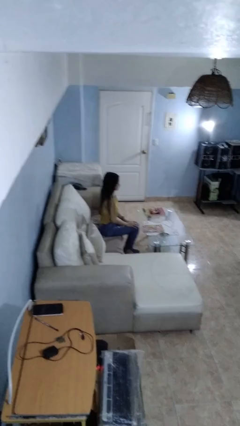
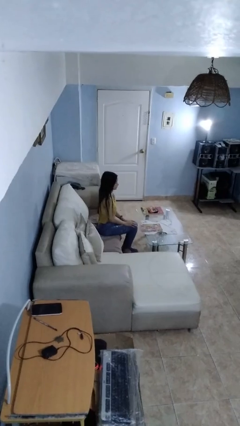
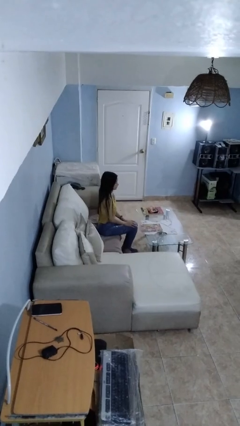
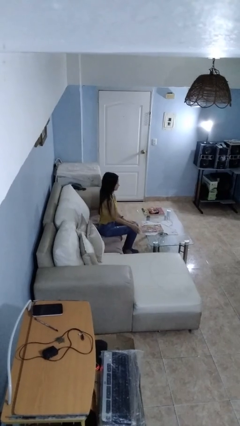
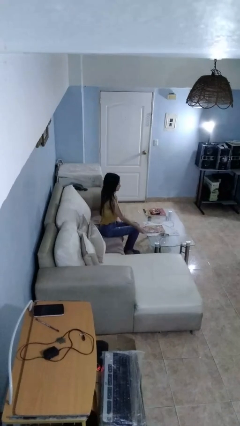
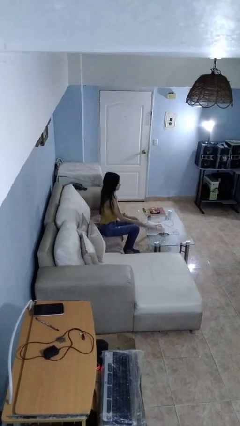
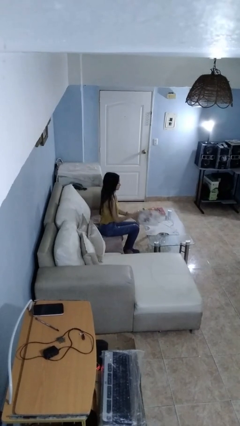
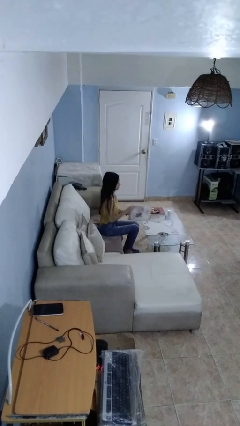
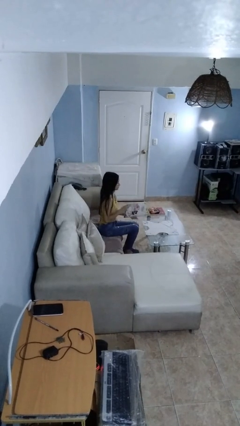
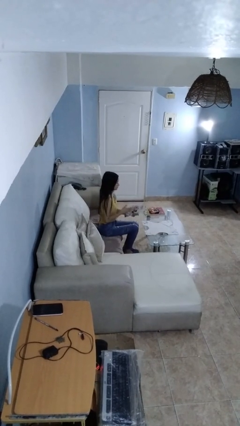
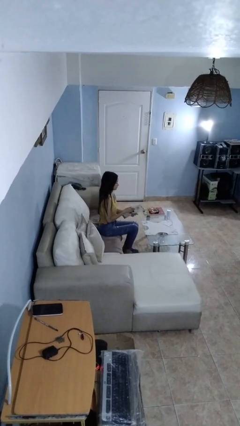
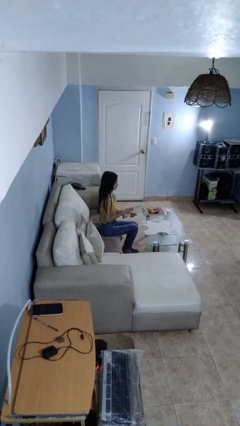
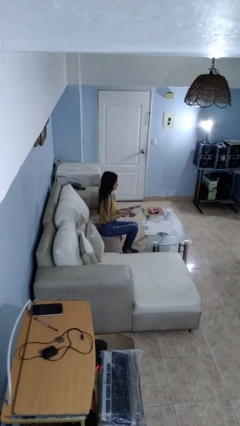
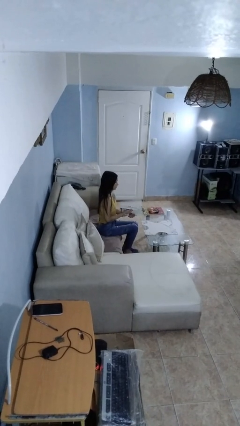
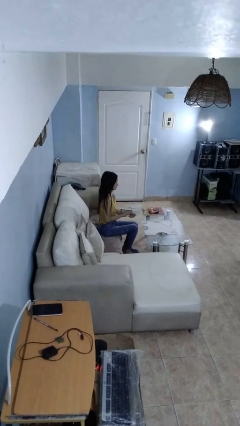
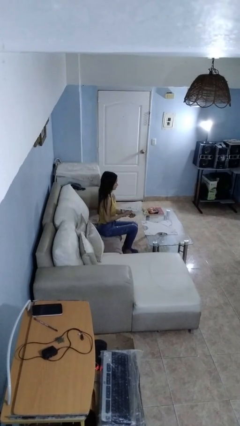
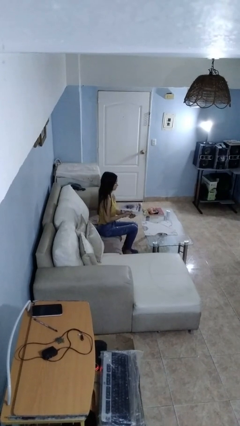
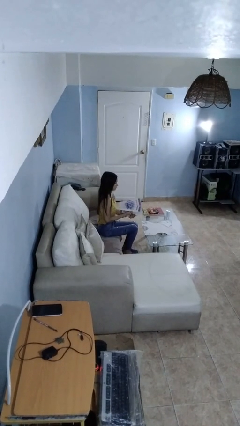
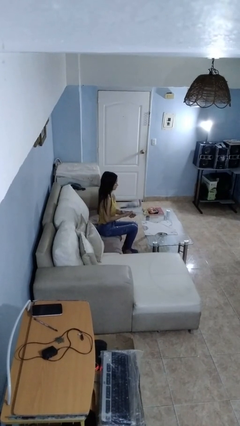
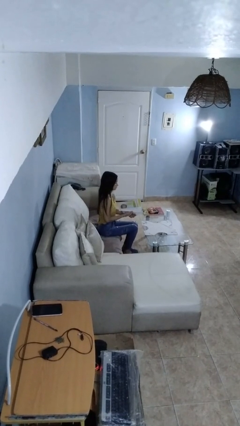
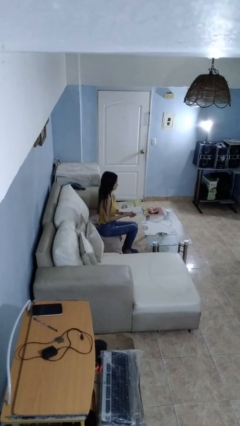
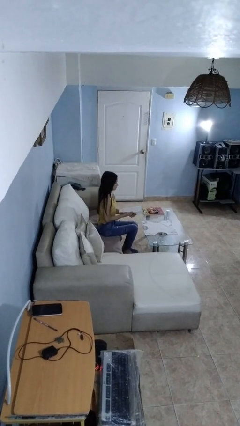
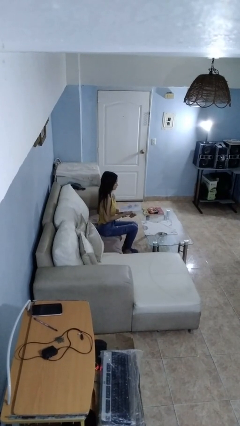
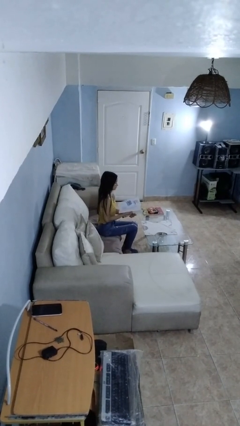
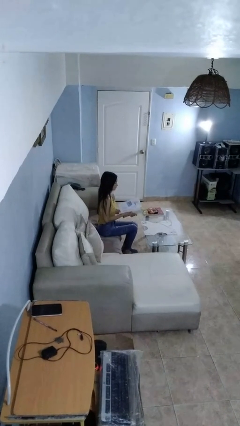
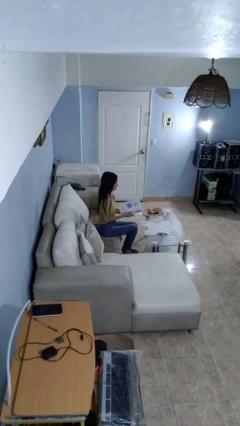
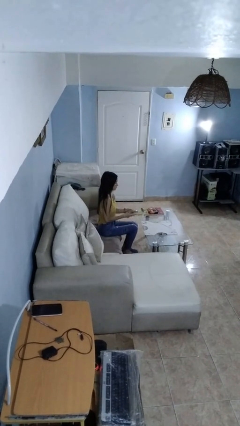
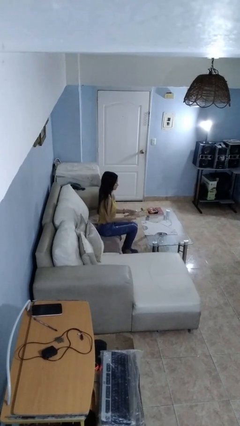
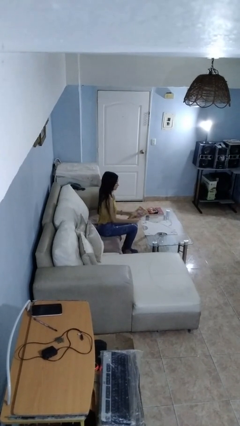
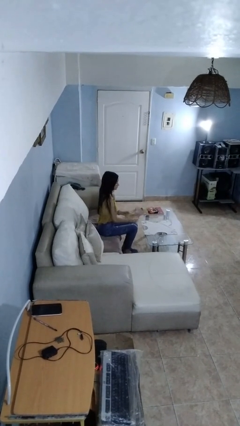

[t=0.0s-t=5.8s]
person reads magazine

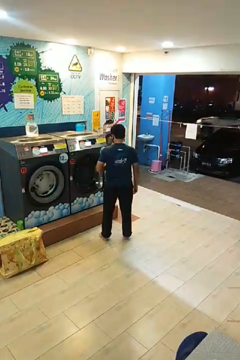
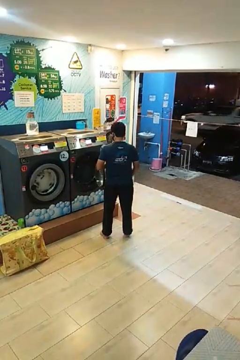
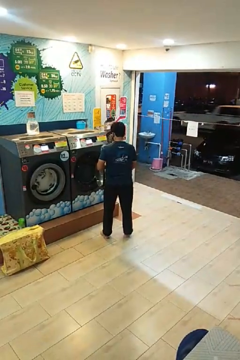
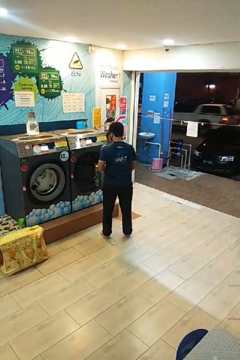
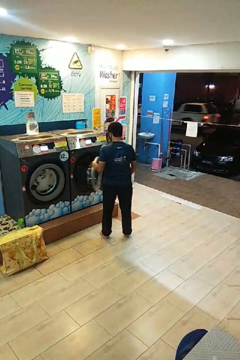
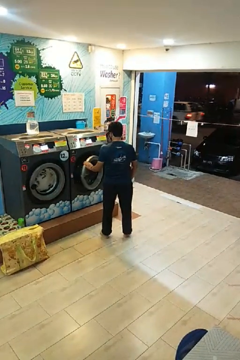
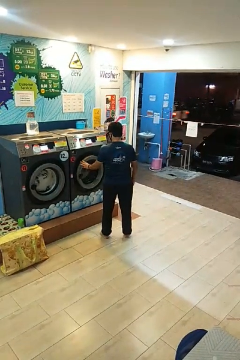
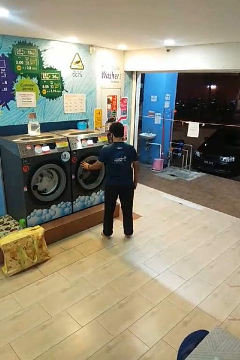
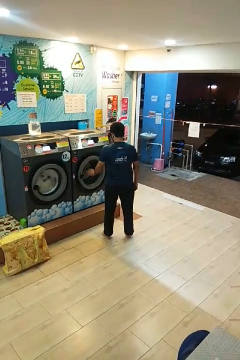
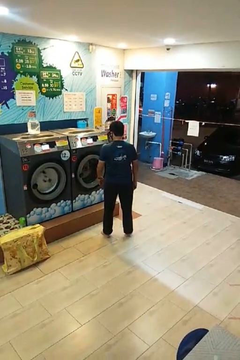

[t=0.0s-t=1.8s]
person closes clothes washer

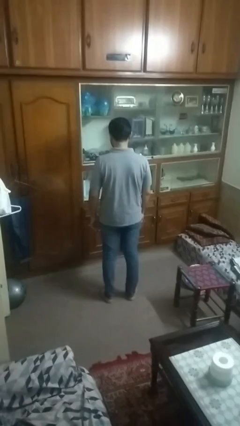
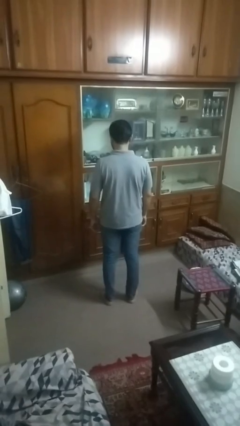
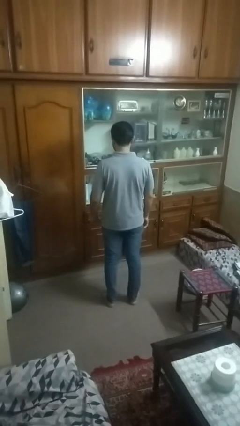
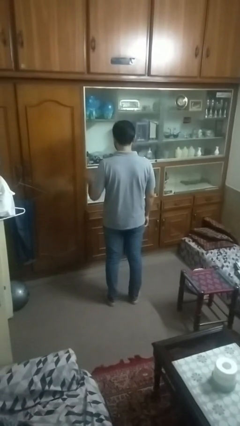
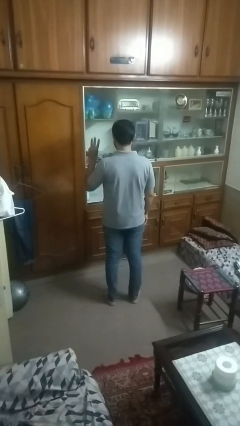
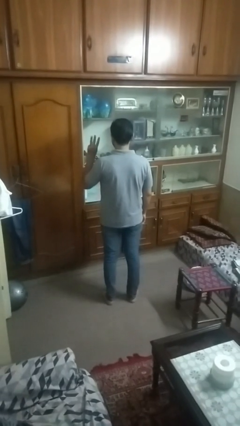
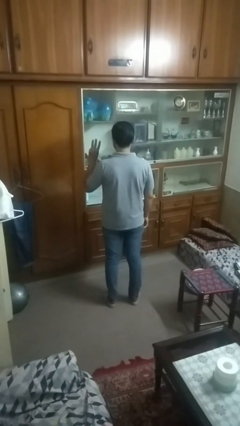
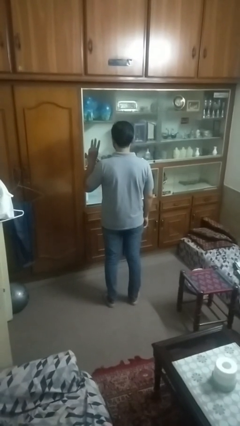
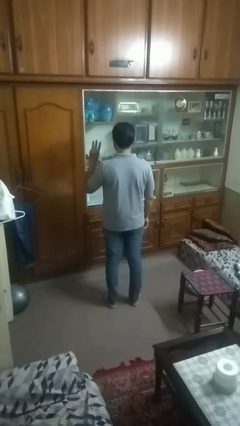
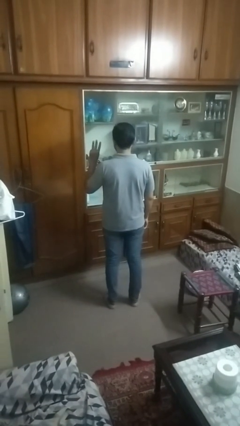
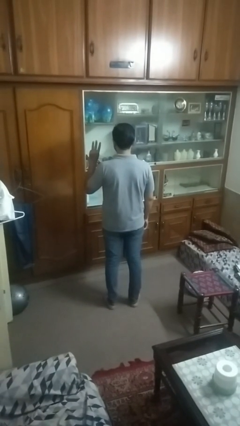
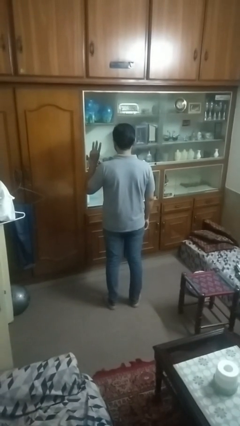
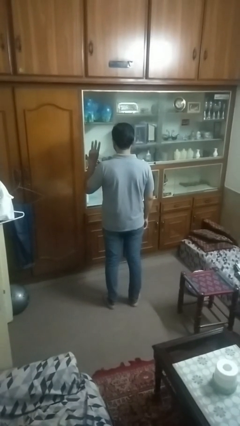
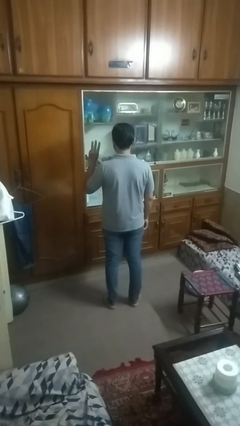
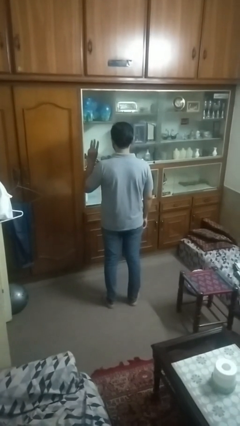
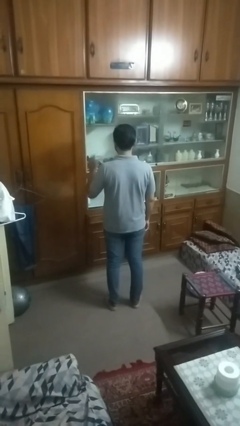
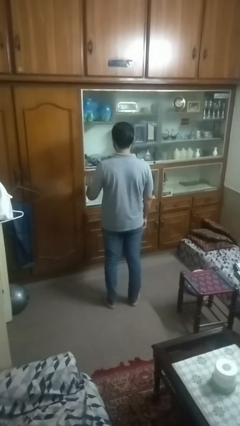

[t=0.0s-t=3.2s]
person gestures number three

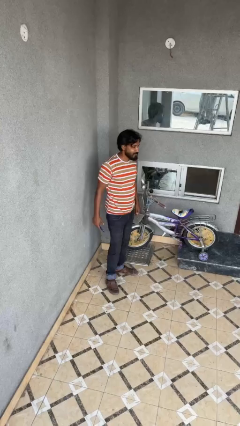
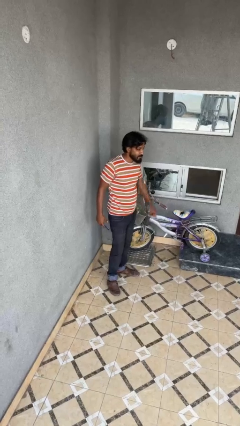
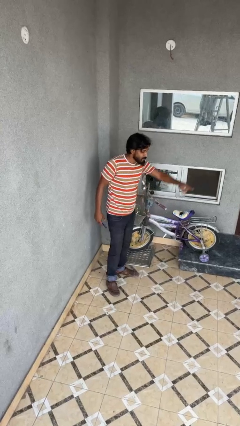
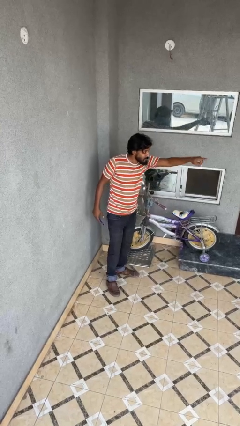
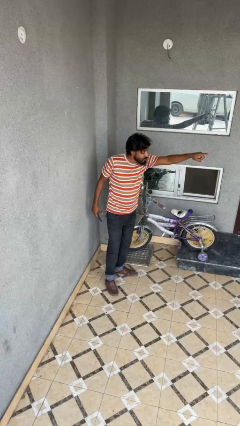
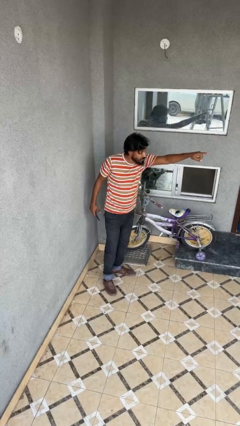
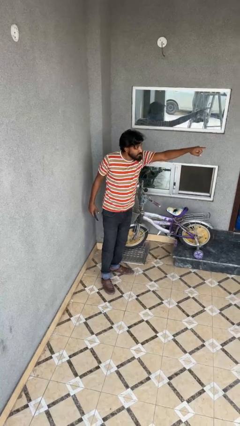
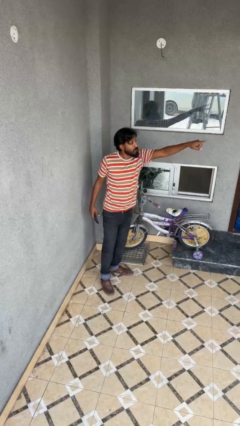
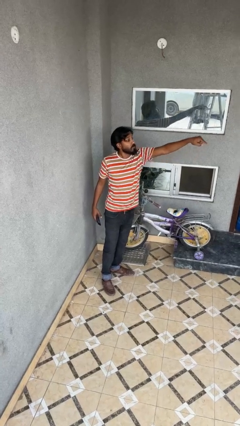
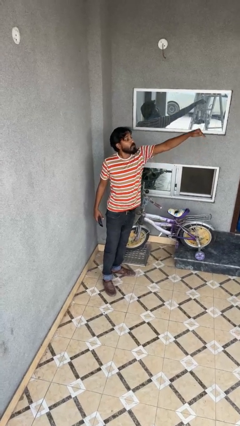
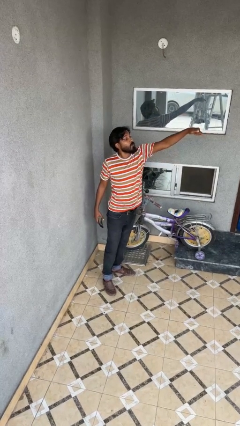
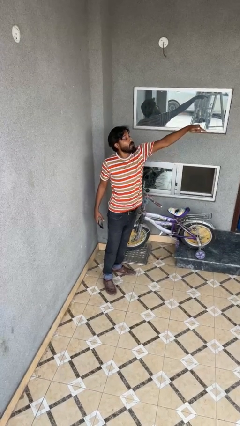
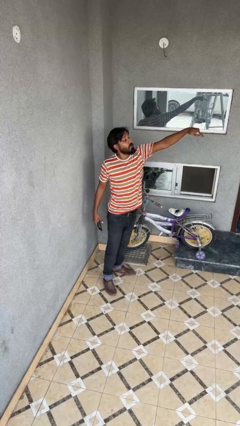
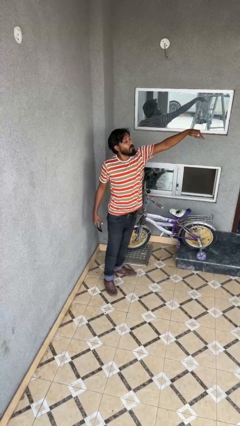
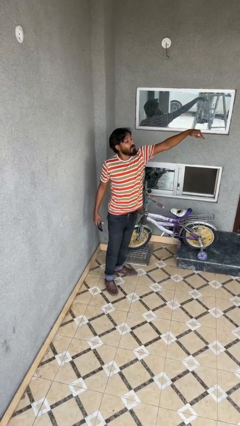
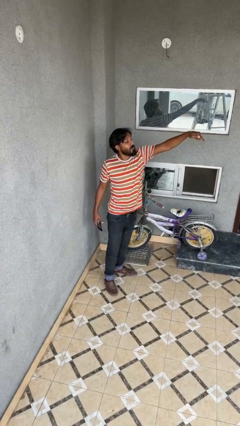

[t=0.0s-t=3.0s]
person points at person

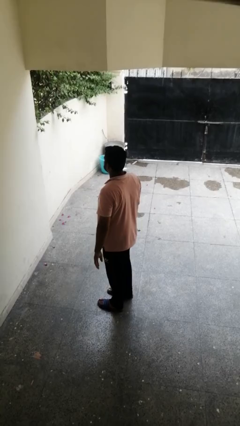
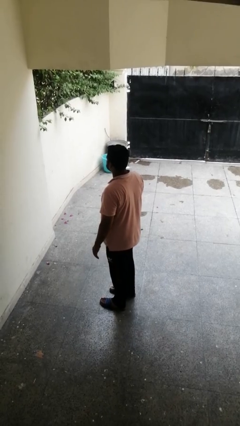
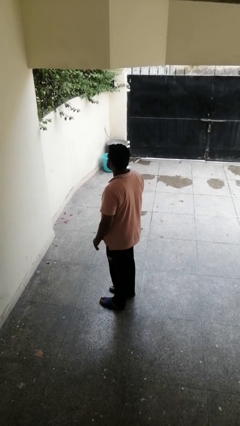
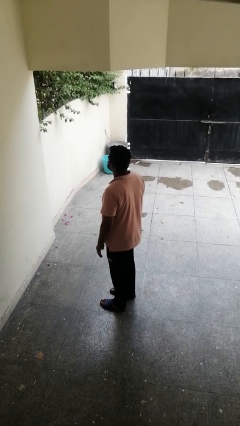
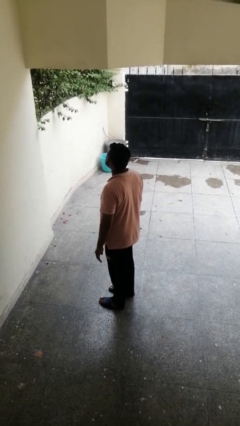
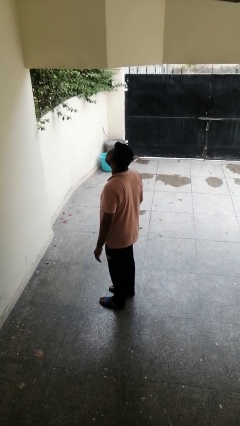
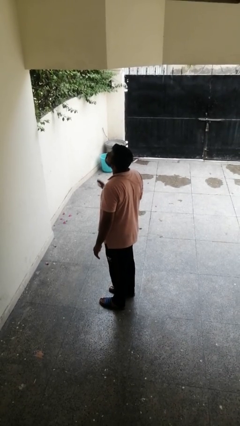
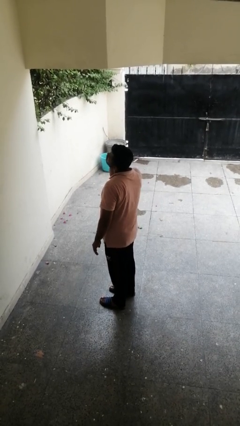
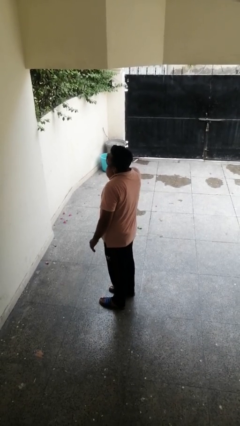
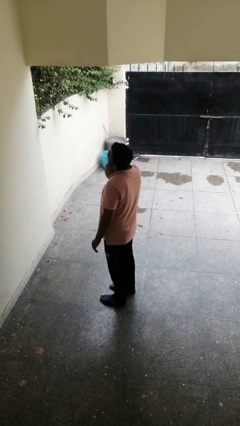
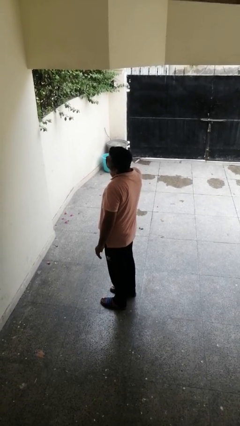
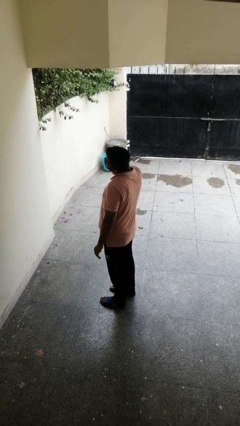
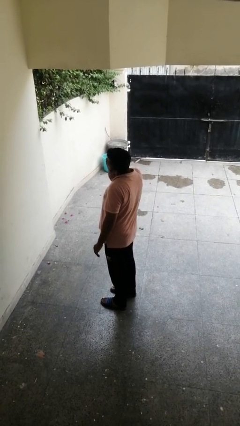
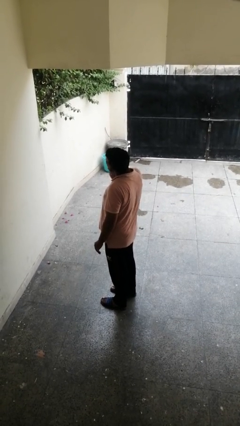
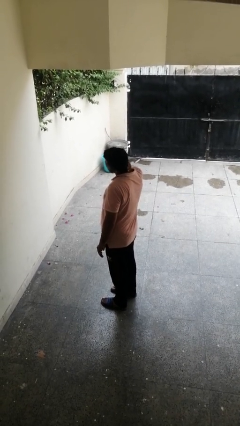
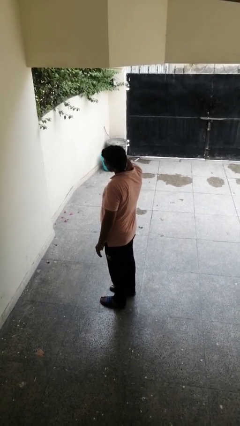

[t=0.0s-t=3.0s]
person rubs neck

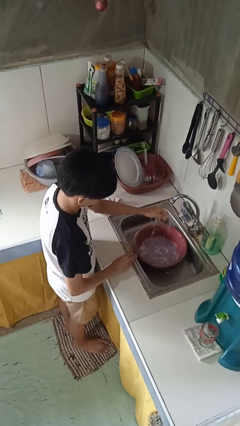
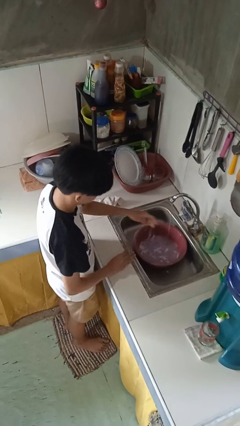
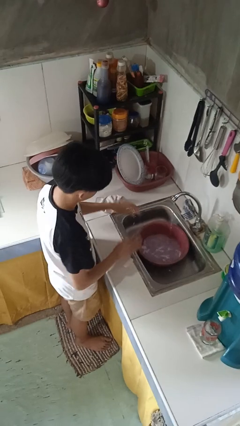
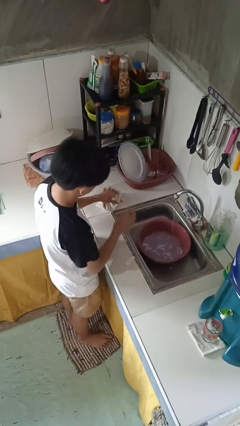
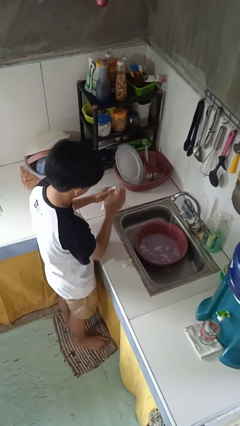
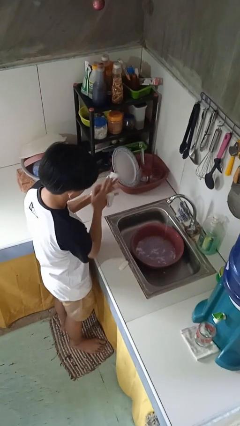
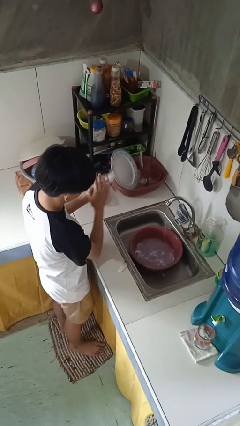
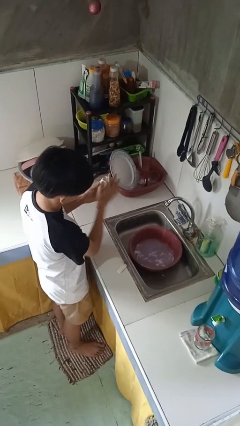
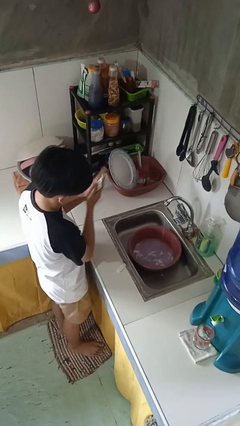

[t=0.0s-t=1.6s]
person dries hands with towel
